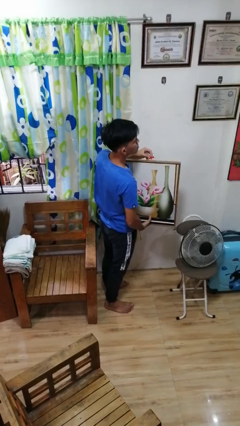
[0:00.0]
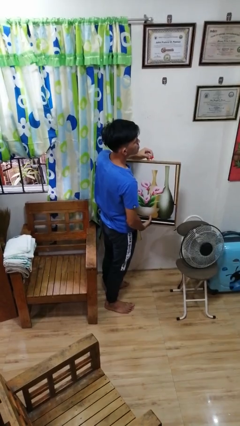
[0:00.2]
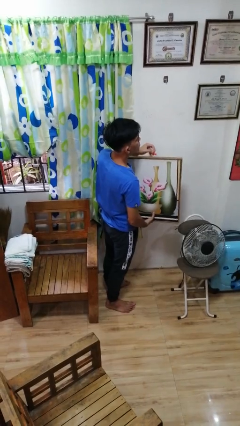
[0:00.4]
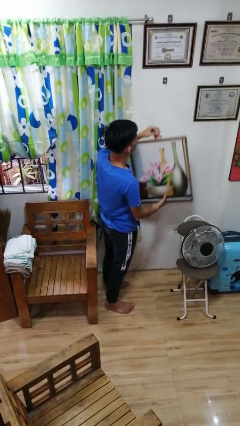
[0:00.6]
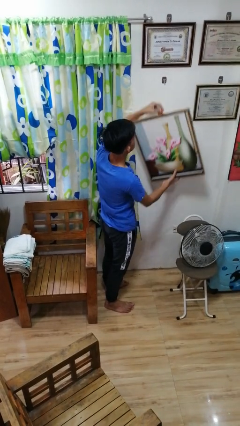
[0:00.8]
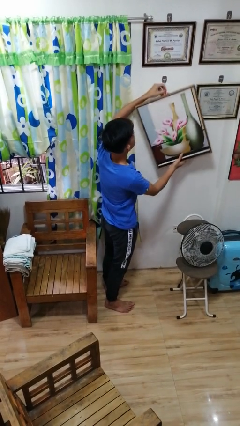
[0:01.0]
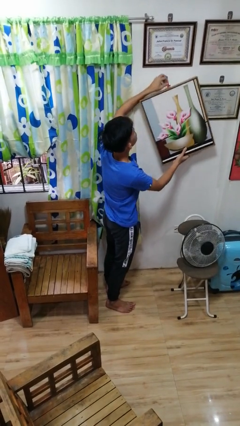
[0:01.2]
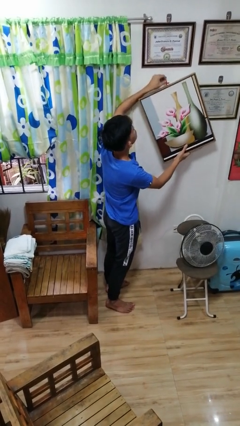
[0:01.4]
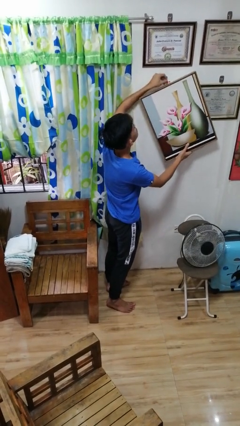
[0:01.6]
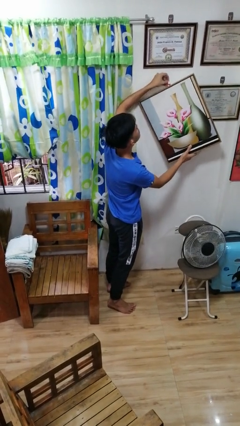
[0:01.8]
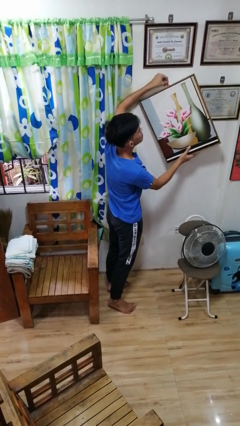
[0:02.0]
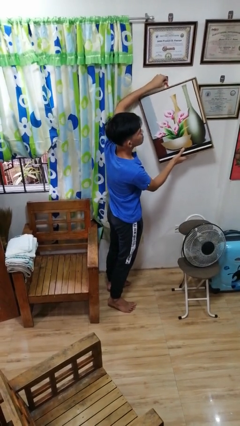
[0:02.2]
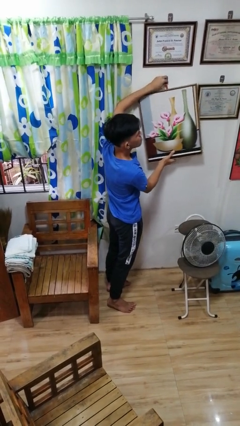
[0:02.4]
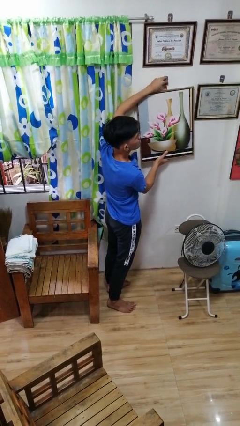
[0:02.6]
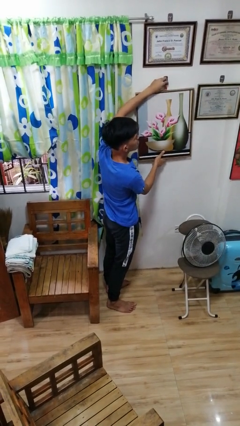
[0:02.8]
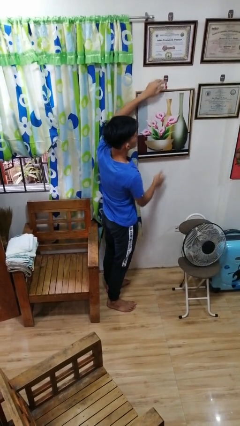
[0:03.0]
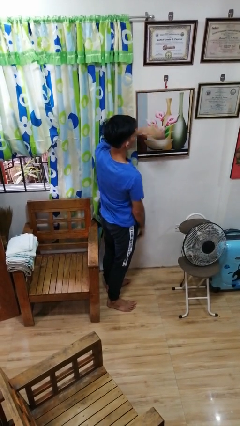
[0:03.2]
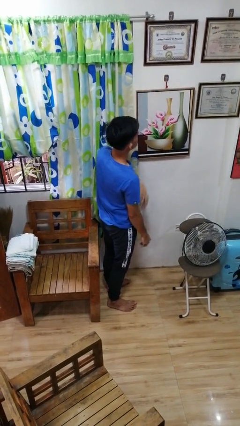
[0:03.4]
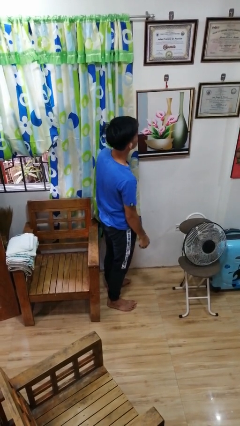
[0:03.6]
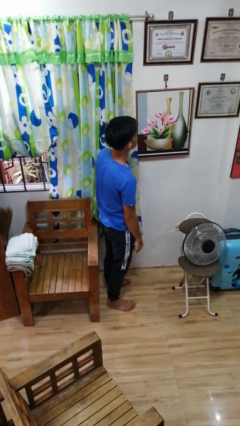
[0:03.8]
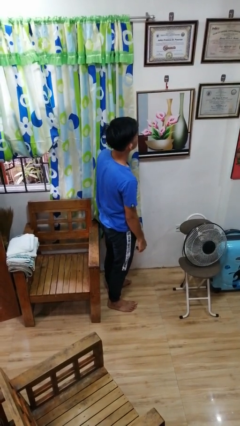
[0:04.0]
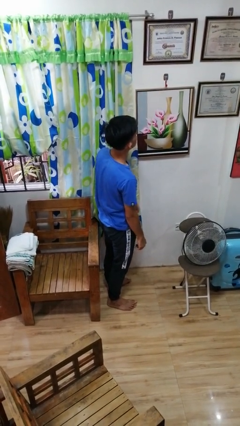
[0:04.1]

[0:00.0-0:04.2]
person puts up picture frame

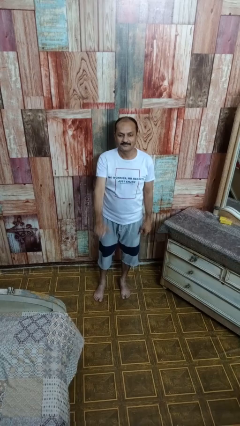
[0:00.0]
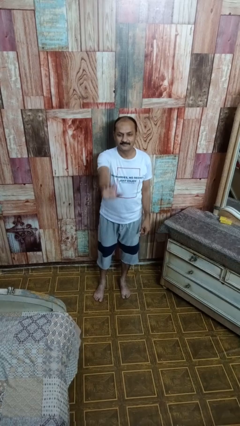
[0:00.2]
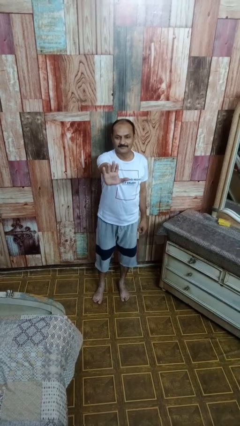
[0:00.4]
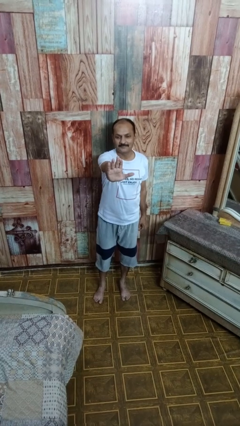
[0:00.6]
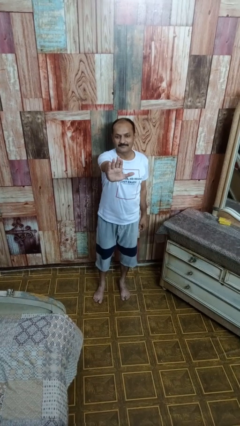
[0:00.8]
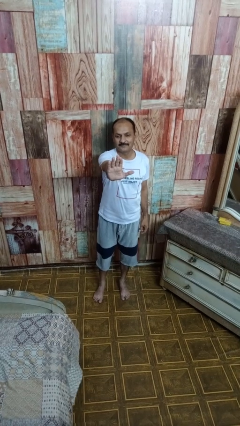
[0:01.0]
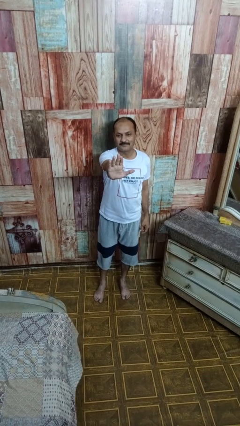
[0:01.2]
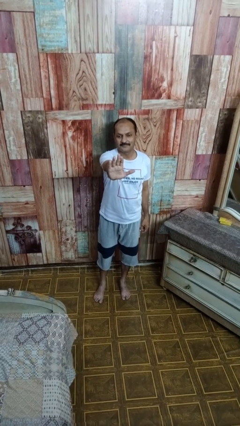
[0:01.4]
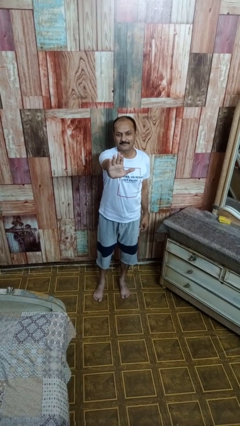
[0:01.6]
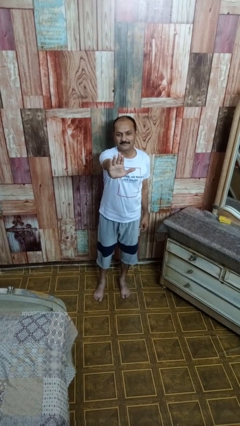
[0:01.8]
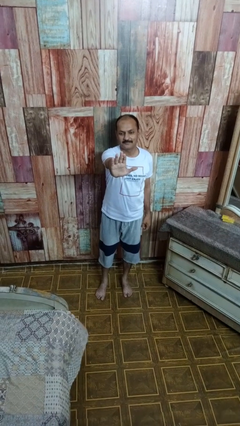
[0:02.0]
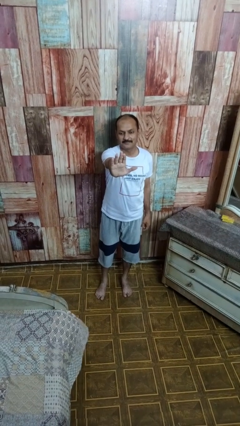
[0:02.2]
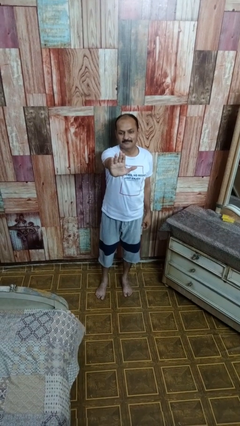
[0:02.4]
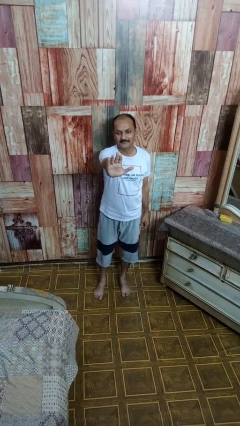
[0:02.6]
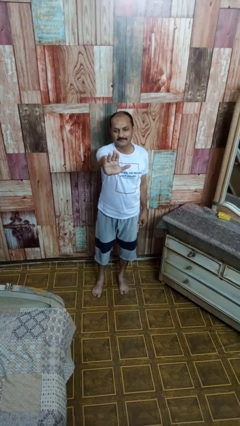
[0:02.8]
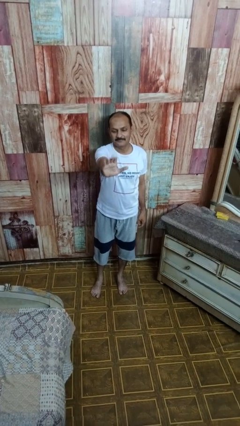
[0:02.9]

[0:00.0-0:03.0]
person gestures stop

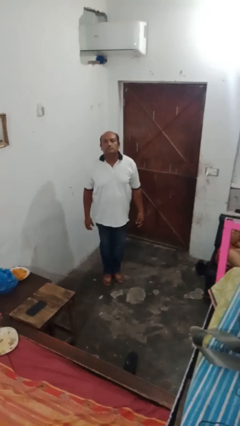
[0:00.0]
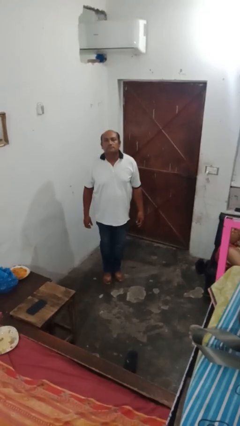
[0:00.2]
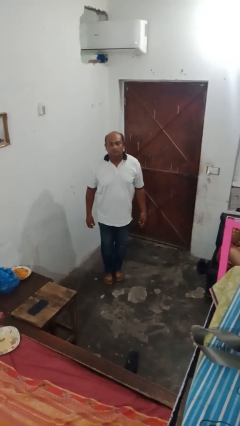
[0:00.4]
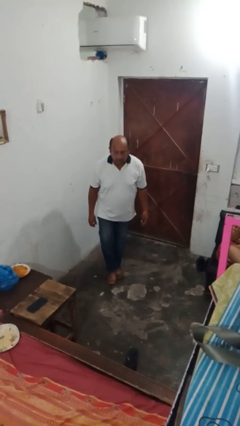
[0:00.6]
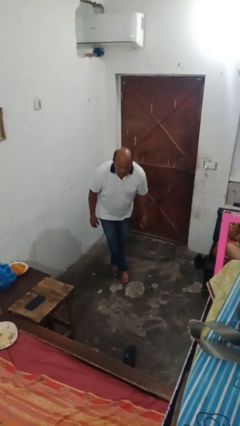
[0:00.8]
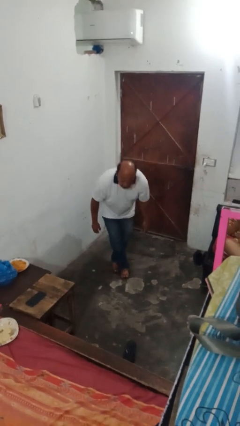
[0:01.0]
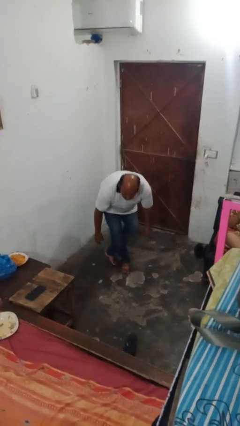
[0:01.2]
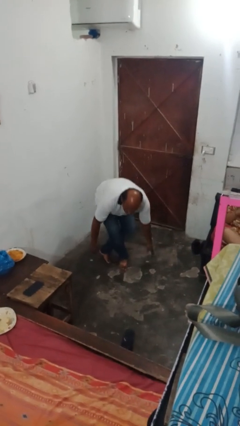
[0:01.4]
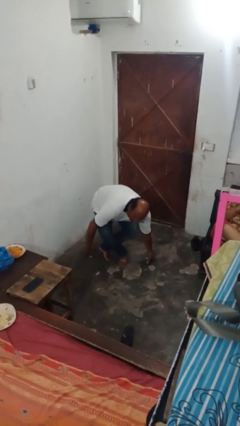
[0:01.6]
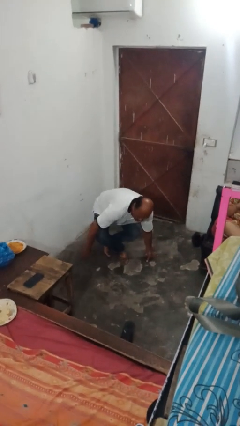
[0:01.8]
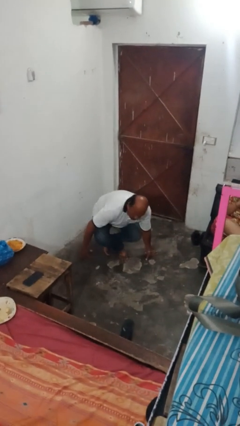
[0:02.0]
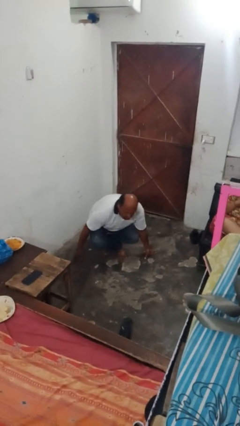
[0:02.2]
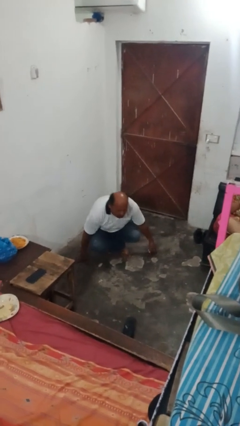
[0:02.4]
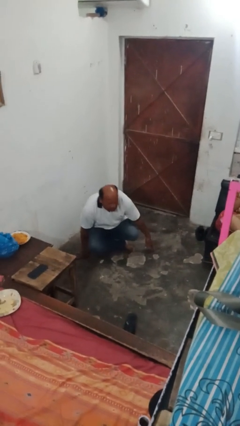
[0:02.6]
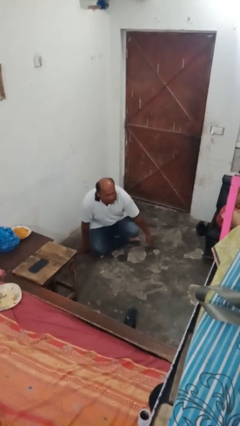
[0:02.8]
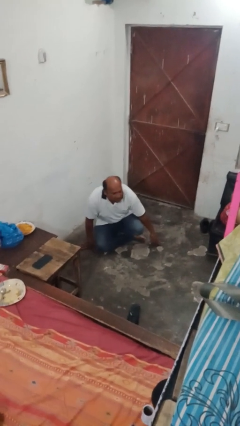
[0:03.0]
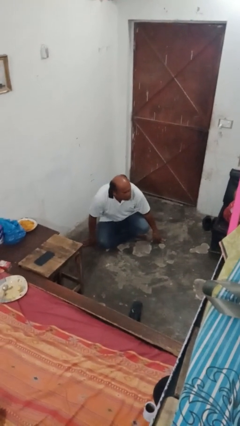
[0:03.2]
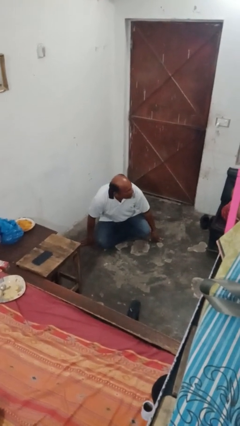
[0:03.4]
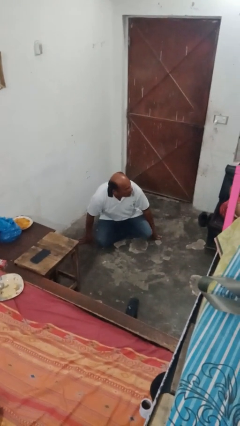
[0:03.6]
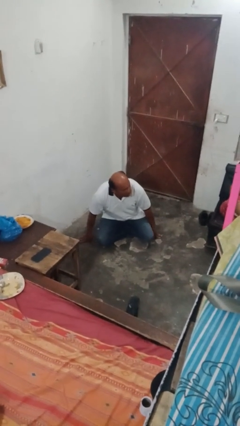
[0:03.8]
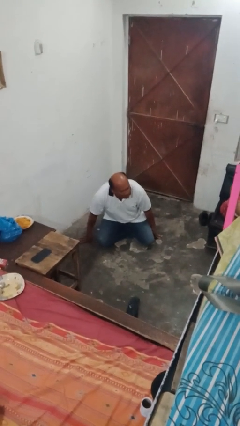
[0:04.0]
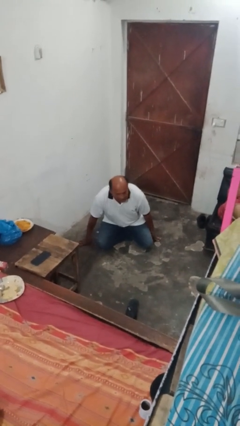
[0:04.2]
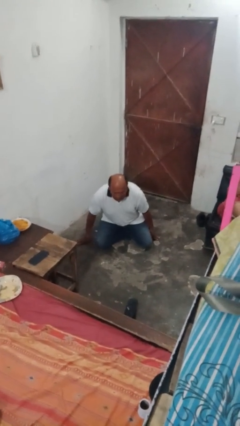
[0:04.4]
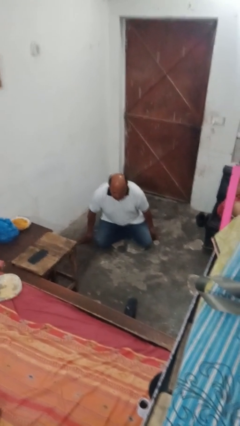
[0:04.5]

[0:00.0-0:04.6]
person sits crisscross

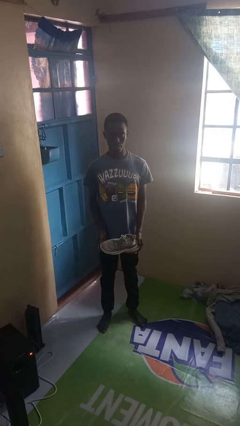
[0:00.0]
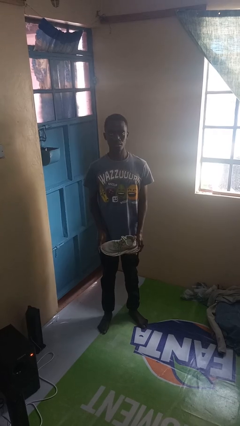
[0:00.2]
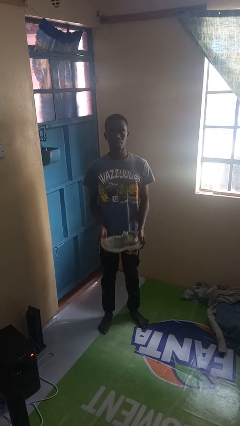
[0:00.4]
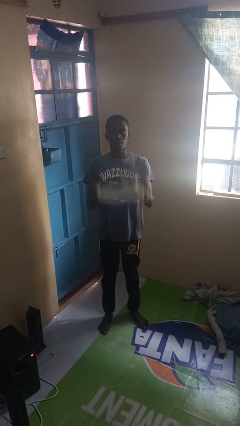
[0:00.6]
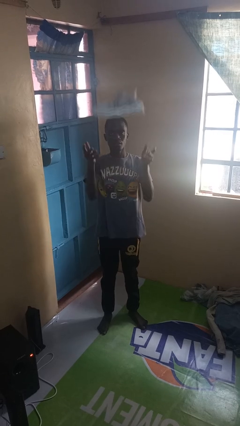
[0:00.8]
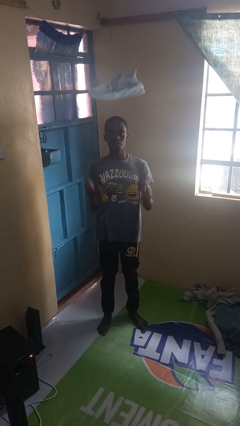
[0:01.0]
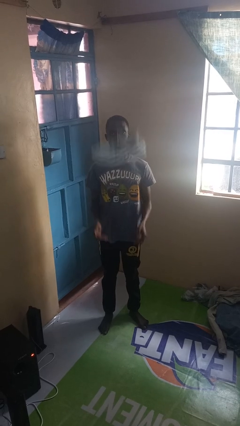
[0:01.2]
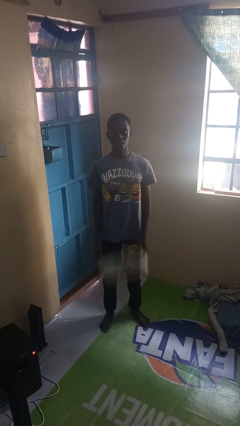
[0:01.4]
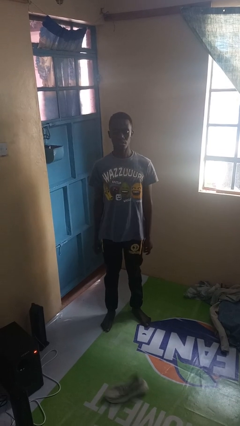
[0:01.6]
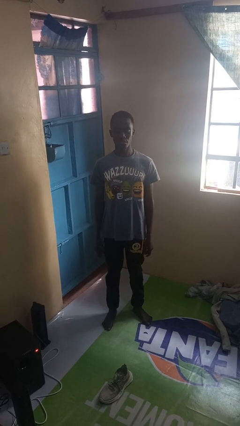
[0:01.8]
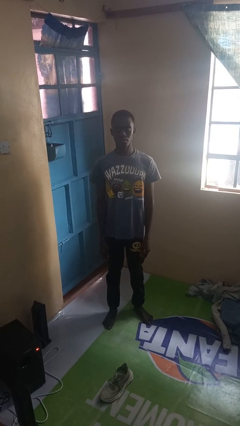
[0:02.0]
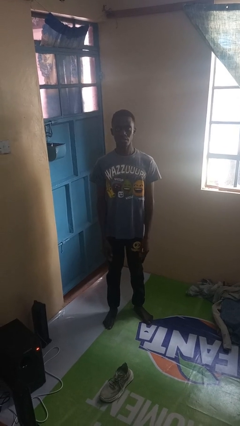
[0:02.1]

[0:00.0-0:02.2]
person throws object into air

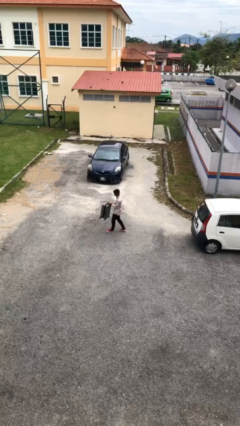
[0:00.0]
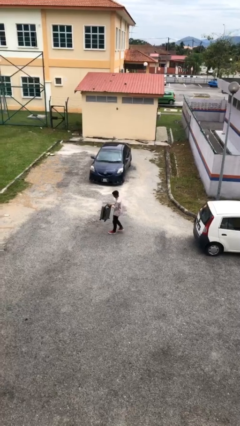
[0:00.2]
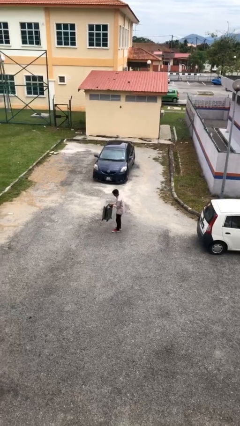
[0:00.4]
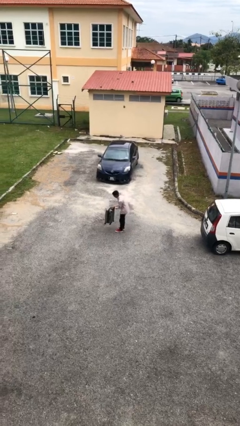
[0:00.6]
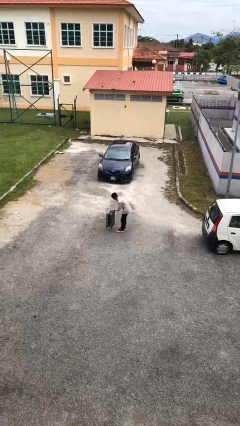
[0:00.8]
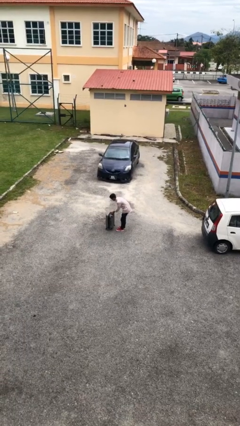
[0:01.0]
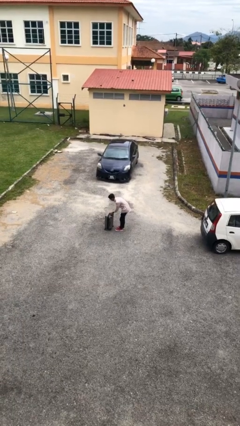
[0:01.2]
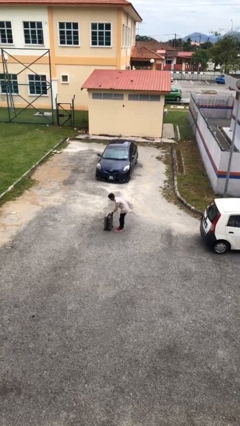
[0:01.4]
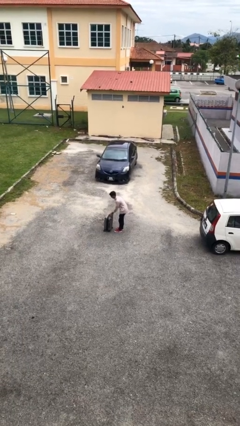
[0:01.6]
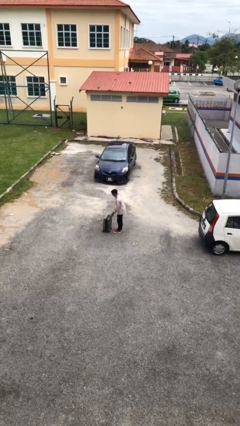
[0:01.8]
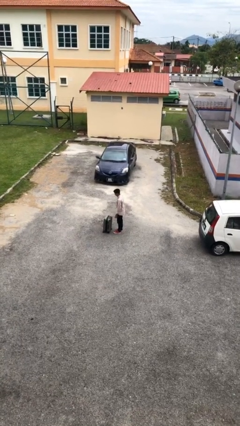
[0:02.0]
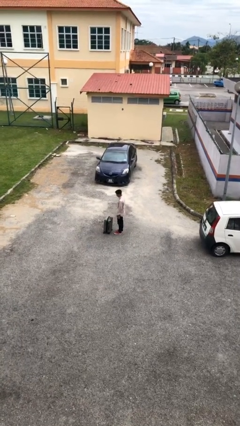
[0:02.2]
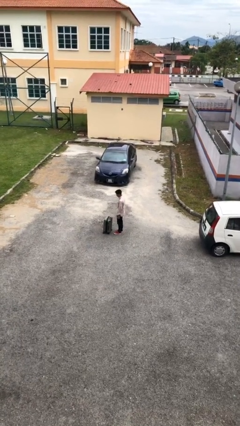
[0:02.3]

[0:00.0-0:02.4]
person puts down object on floor

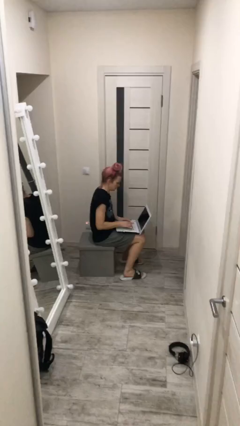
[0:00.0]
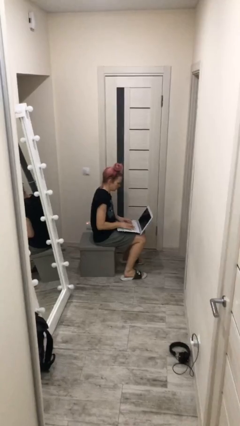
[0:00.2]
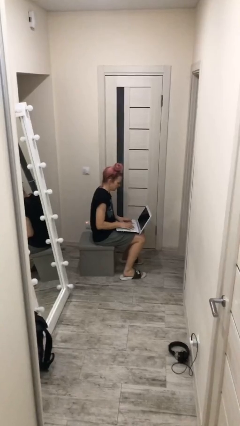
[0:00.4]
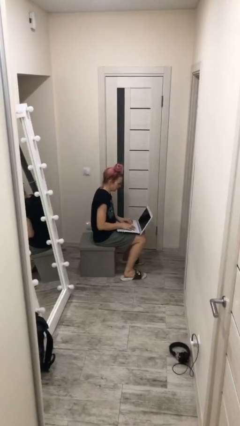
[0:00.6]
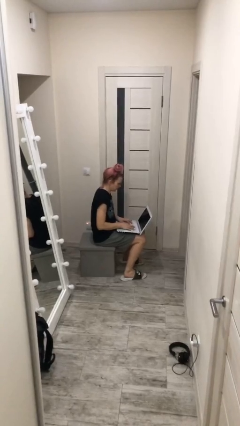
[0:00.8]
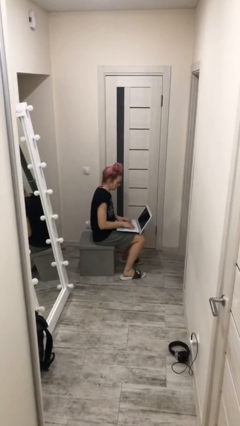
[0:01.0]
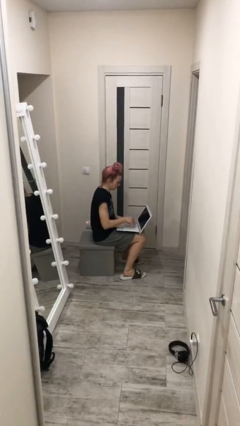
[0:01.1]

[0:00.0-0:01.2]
person interacts with laptop
